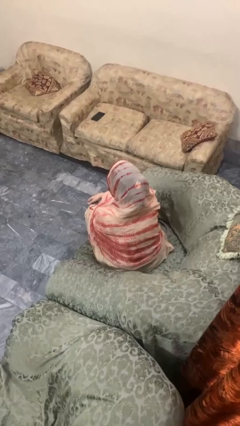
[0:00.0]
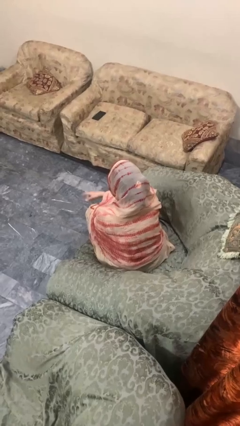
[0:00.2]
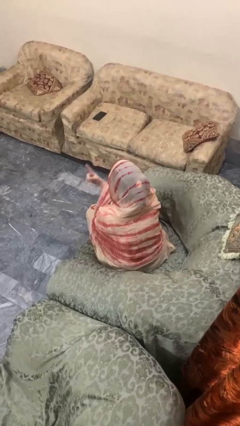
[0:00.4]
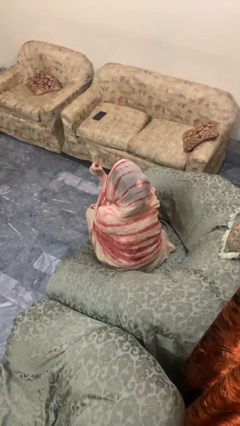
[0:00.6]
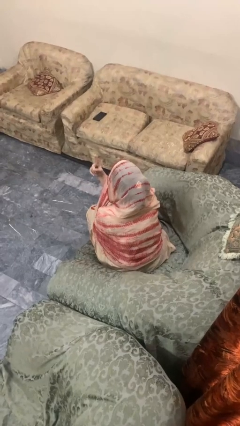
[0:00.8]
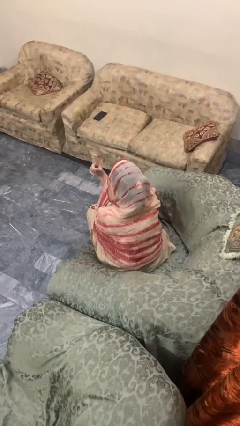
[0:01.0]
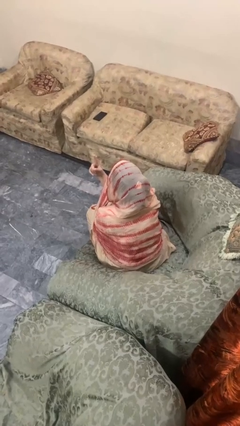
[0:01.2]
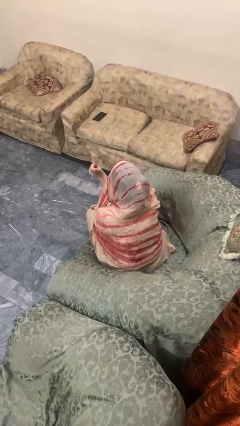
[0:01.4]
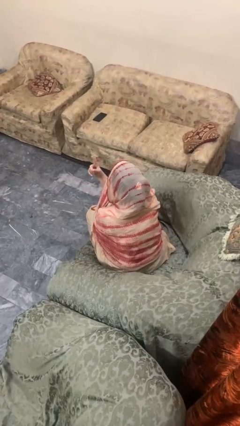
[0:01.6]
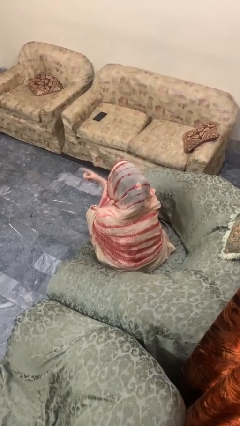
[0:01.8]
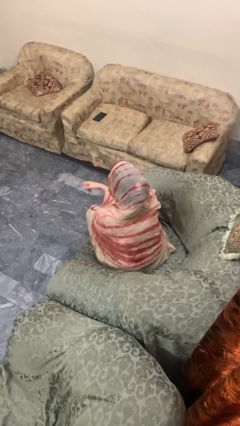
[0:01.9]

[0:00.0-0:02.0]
person gestures number one

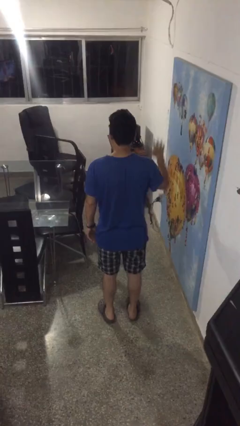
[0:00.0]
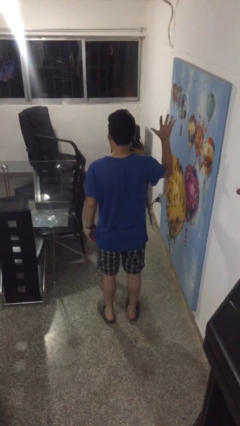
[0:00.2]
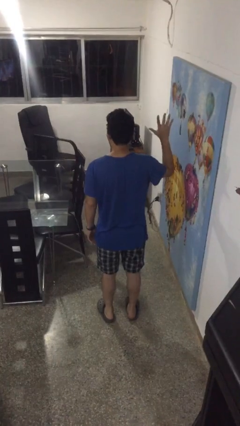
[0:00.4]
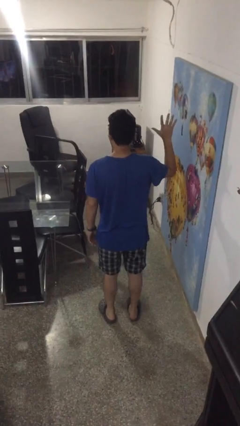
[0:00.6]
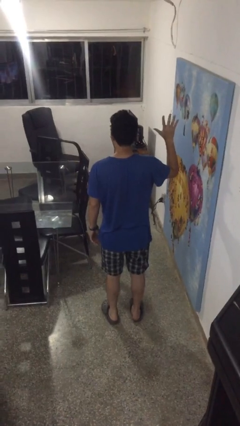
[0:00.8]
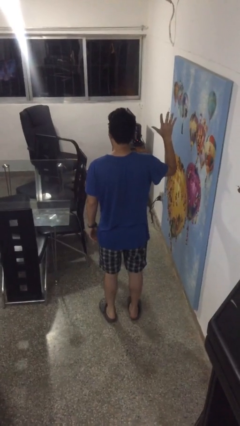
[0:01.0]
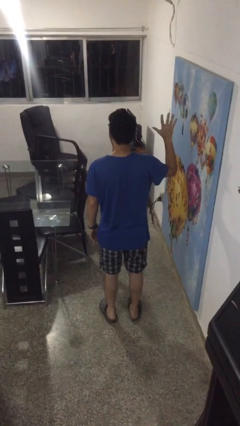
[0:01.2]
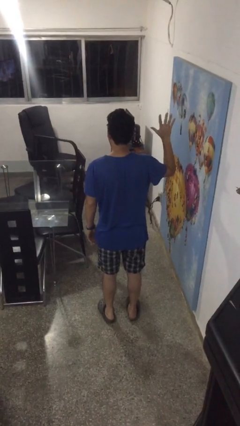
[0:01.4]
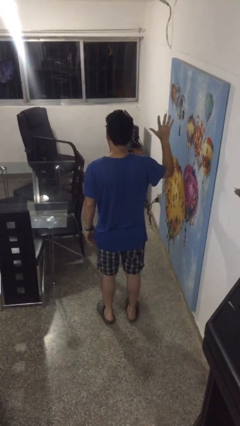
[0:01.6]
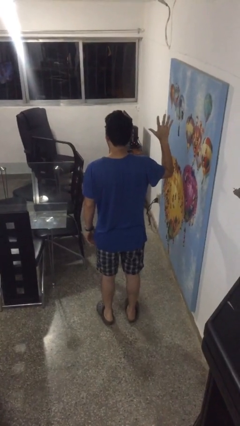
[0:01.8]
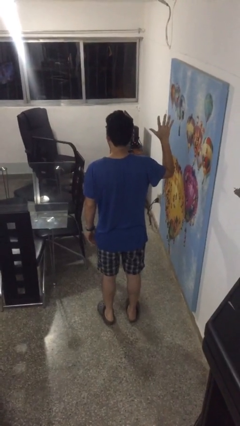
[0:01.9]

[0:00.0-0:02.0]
person gestures number five

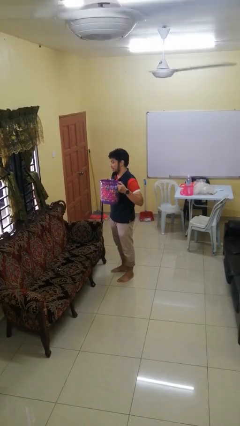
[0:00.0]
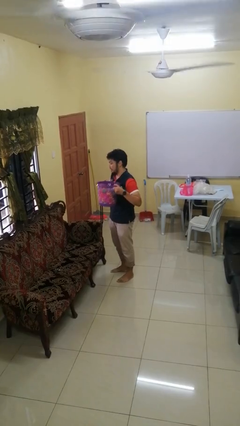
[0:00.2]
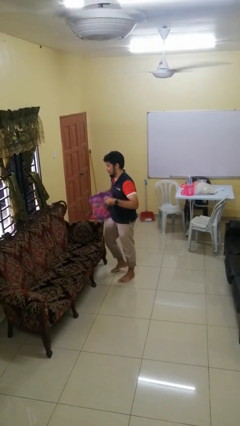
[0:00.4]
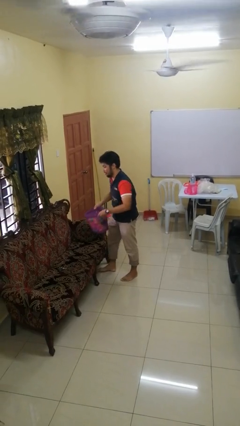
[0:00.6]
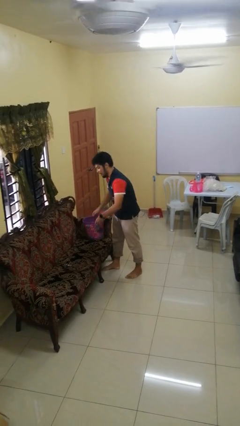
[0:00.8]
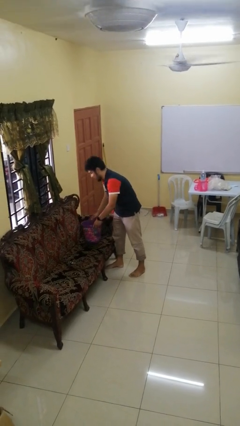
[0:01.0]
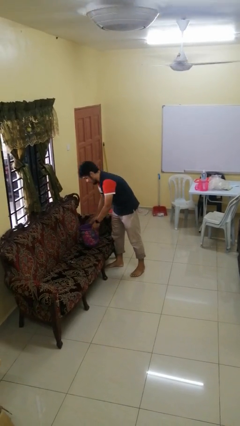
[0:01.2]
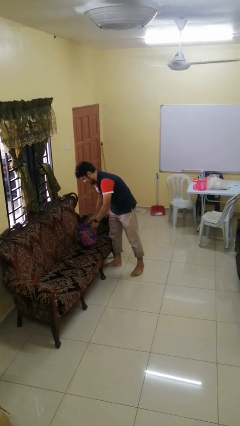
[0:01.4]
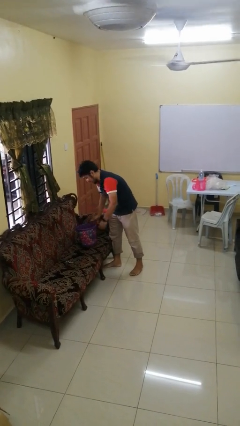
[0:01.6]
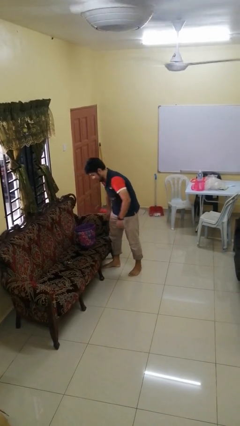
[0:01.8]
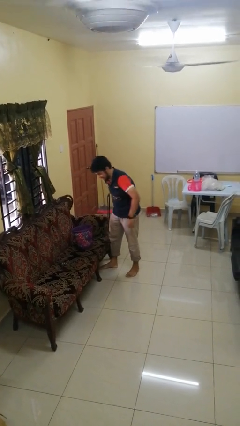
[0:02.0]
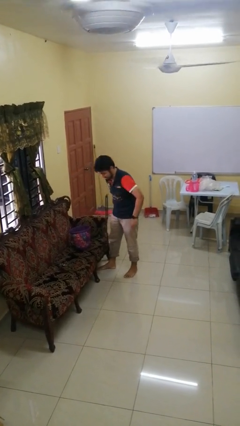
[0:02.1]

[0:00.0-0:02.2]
person puts down object on couch

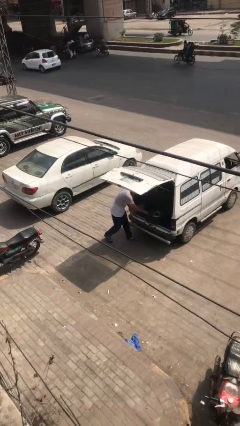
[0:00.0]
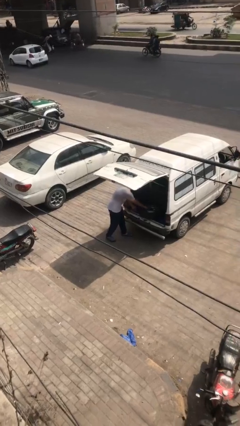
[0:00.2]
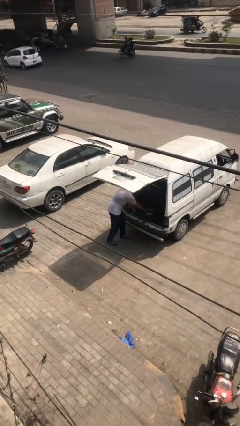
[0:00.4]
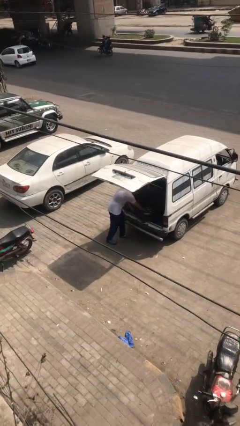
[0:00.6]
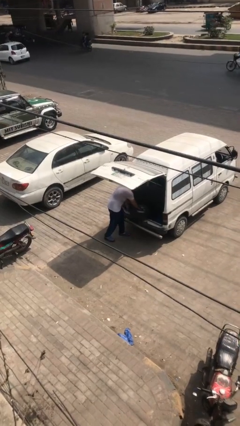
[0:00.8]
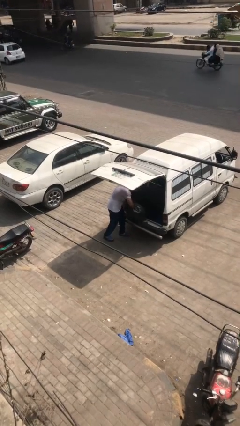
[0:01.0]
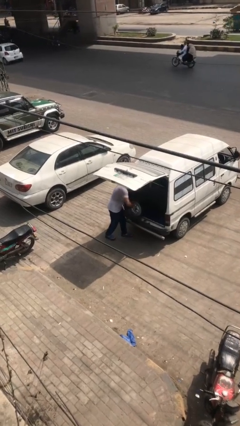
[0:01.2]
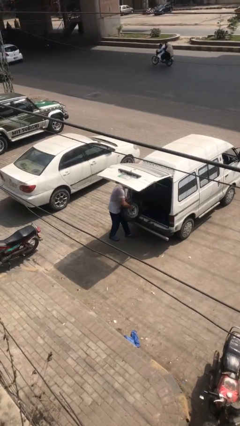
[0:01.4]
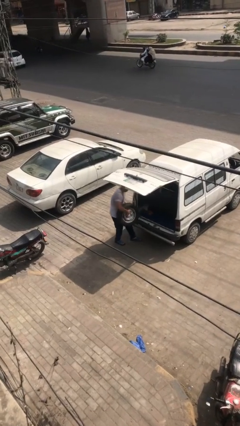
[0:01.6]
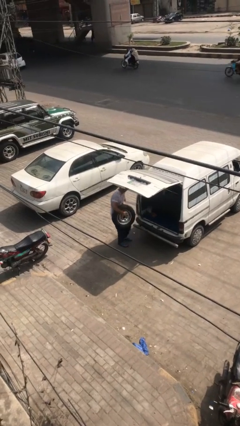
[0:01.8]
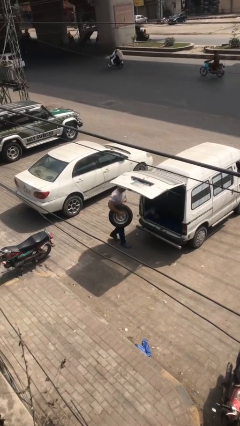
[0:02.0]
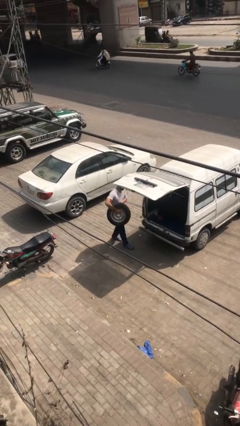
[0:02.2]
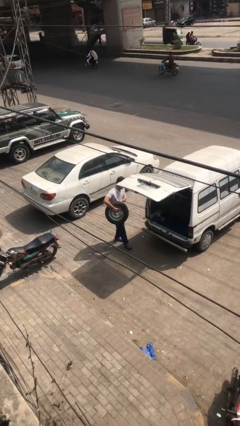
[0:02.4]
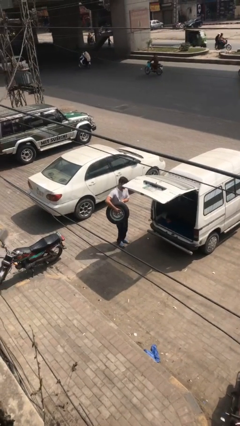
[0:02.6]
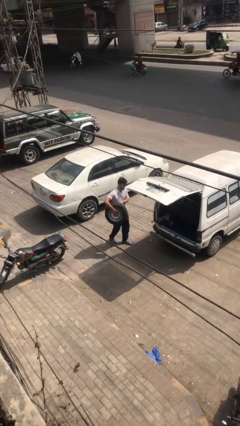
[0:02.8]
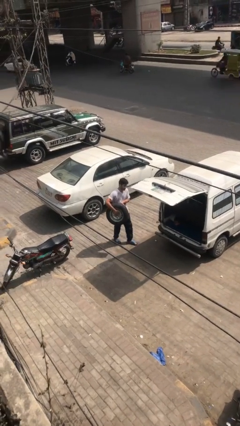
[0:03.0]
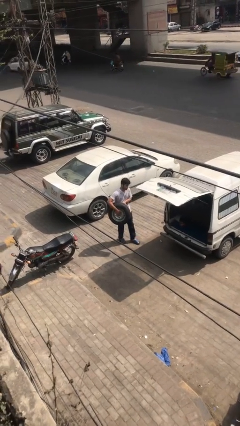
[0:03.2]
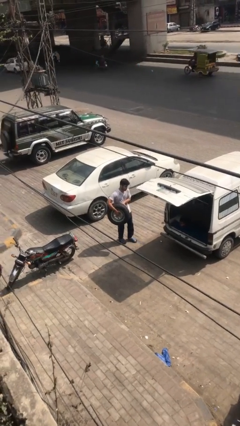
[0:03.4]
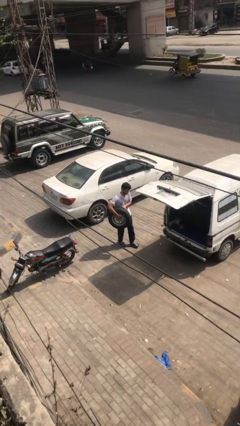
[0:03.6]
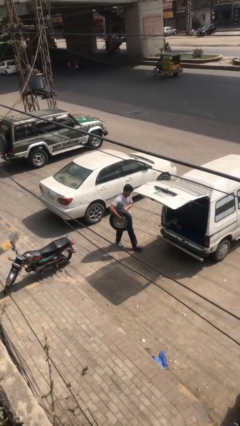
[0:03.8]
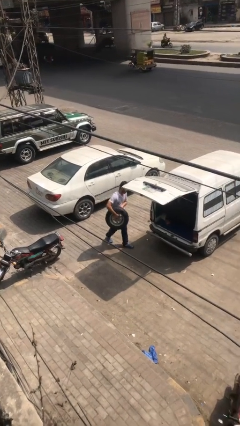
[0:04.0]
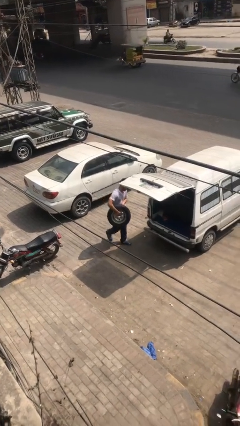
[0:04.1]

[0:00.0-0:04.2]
person unloads car

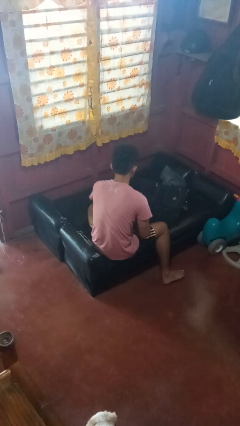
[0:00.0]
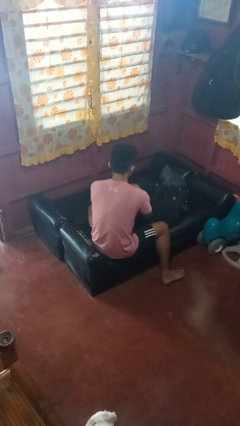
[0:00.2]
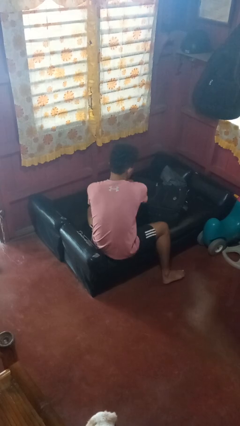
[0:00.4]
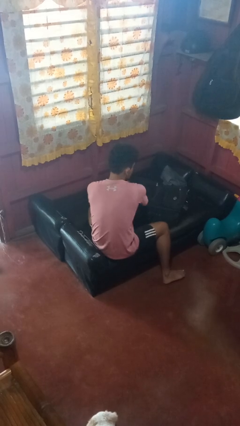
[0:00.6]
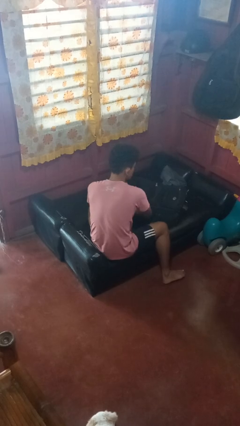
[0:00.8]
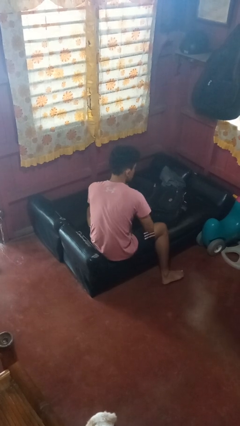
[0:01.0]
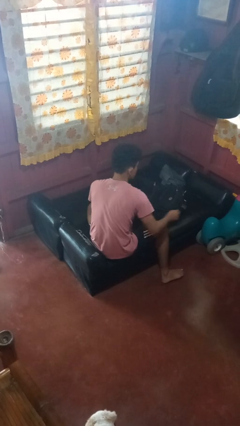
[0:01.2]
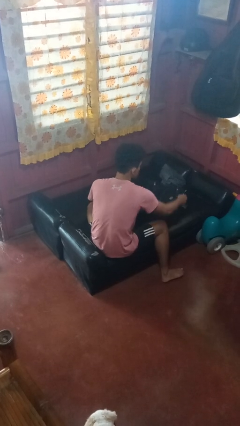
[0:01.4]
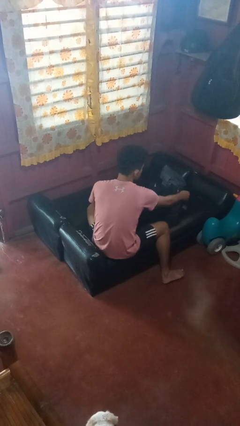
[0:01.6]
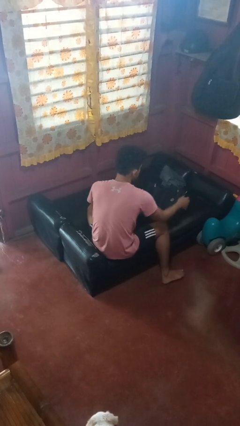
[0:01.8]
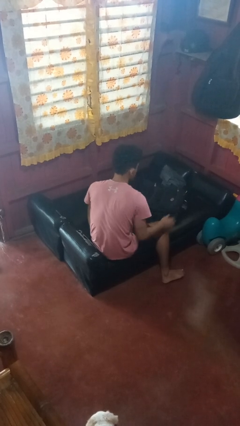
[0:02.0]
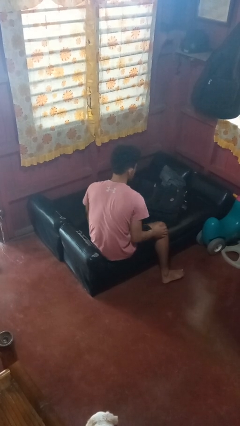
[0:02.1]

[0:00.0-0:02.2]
person closes suitcase

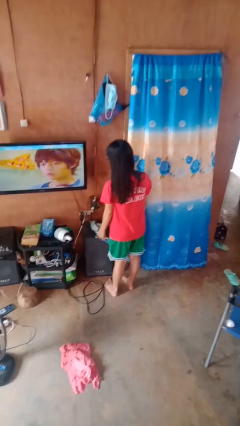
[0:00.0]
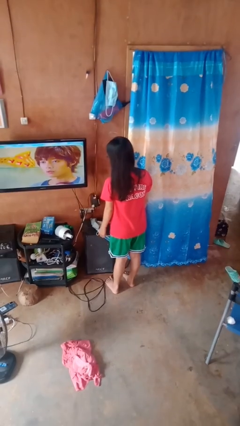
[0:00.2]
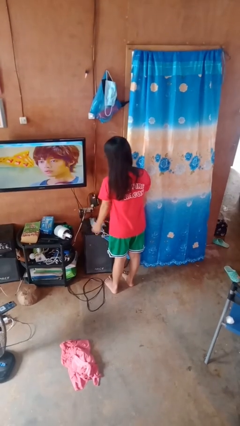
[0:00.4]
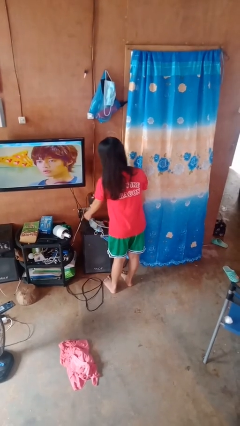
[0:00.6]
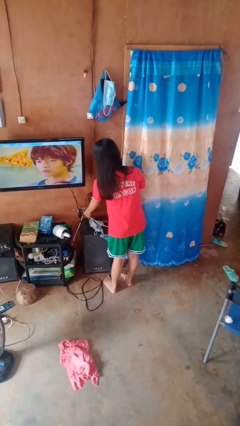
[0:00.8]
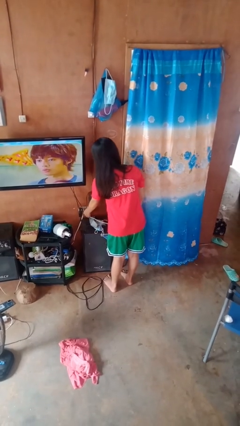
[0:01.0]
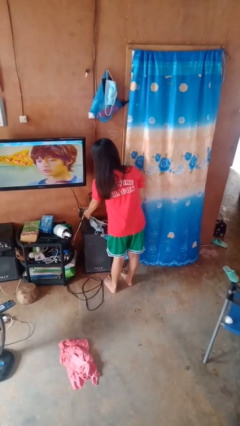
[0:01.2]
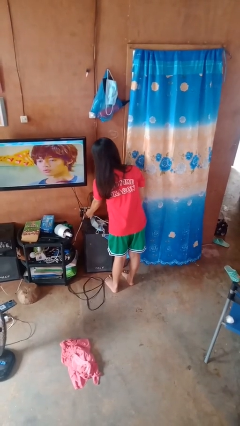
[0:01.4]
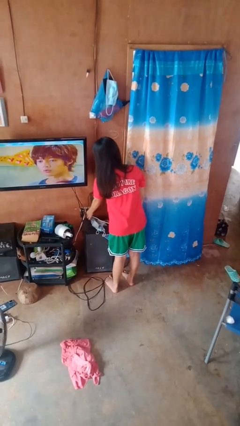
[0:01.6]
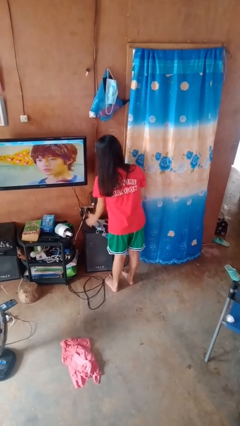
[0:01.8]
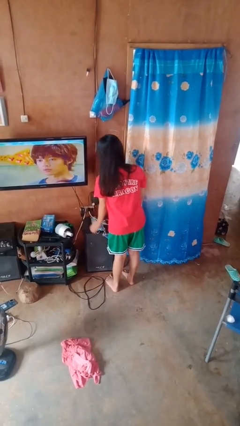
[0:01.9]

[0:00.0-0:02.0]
person plugs into electrical socket

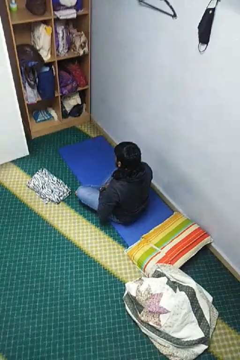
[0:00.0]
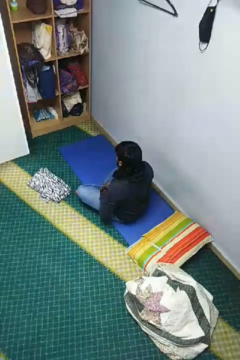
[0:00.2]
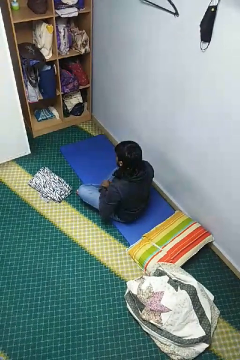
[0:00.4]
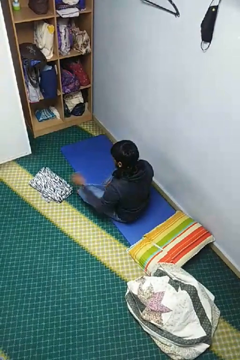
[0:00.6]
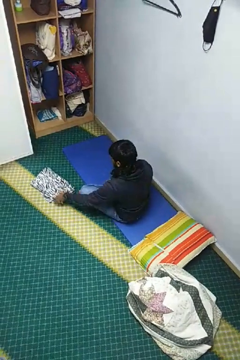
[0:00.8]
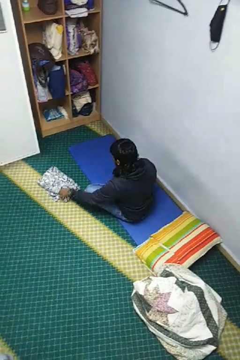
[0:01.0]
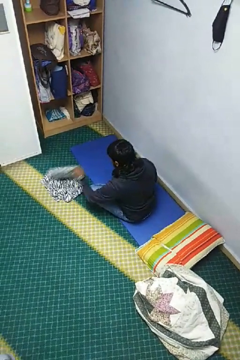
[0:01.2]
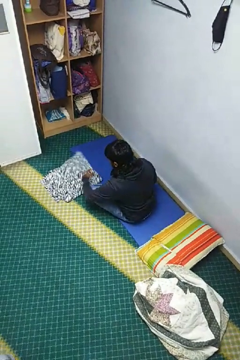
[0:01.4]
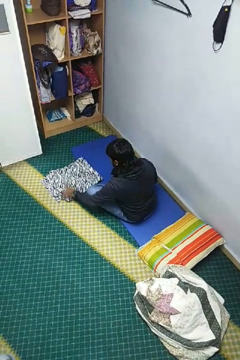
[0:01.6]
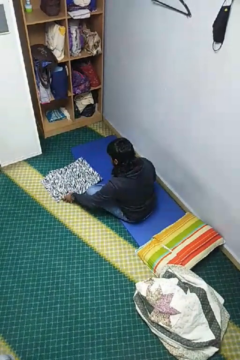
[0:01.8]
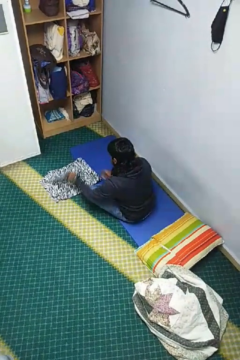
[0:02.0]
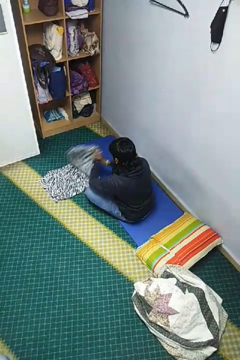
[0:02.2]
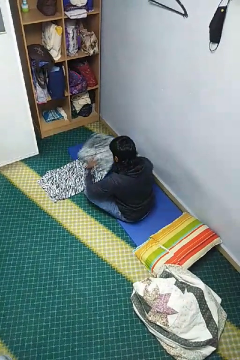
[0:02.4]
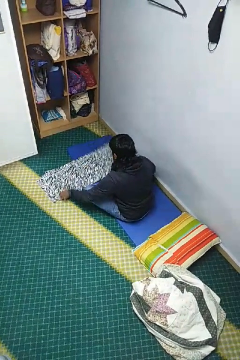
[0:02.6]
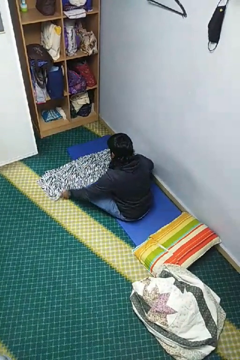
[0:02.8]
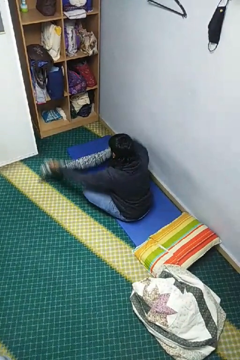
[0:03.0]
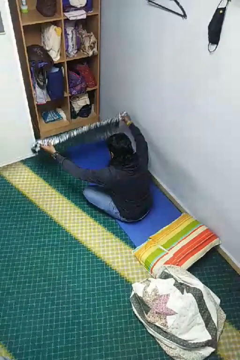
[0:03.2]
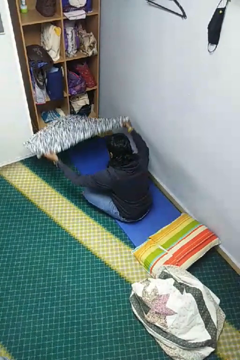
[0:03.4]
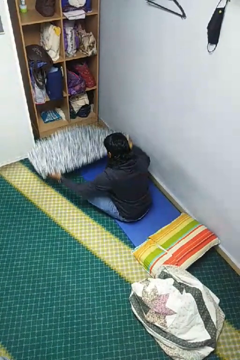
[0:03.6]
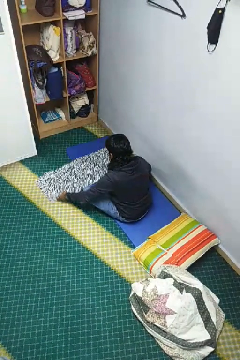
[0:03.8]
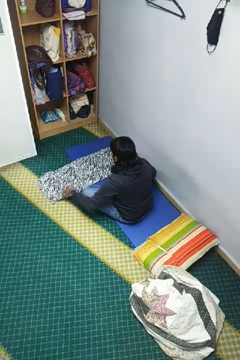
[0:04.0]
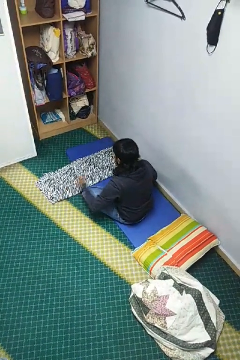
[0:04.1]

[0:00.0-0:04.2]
person unfolds blanket
